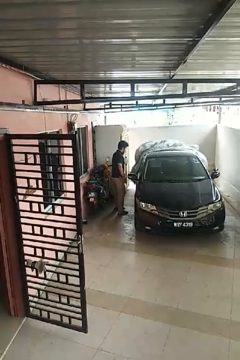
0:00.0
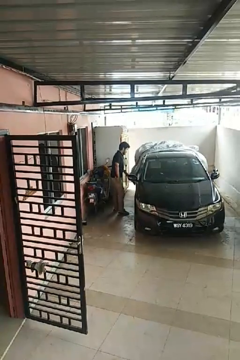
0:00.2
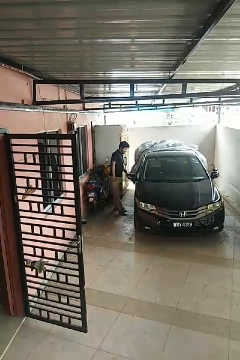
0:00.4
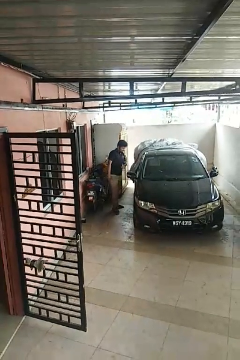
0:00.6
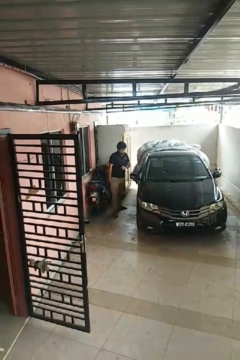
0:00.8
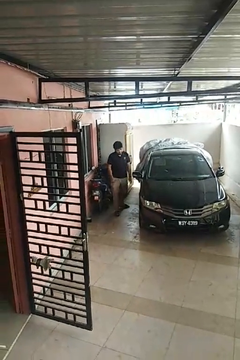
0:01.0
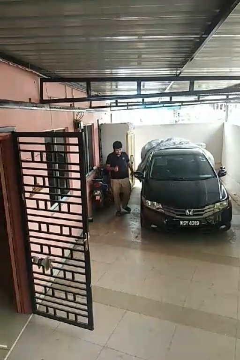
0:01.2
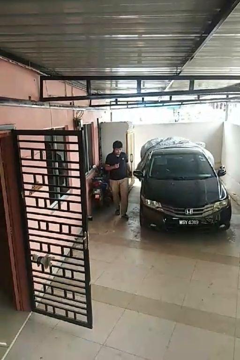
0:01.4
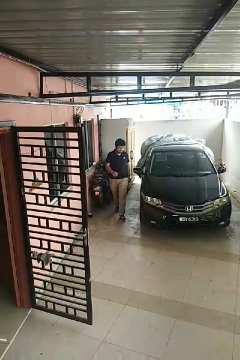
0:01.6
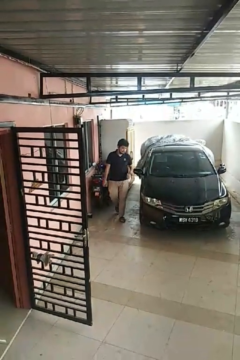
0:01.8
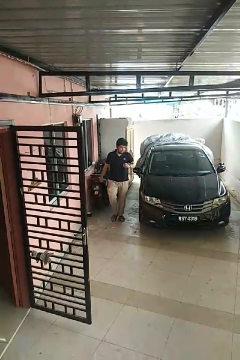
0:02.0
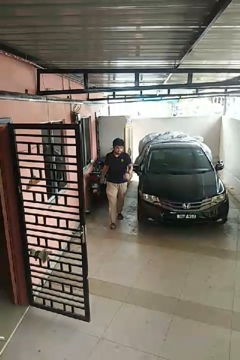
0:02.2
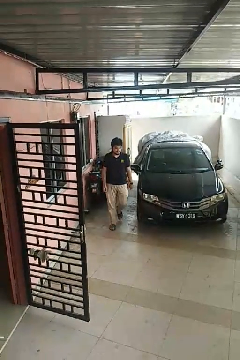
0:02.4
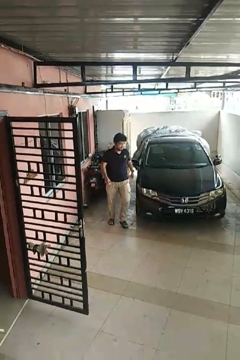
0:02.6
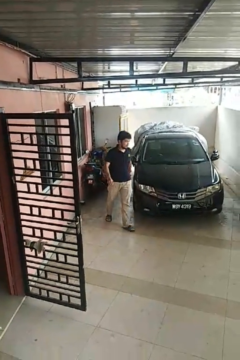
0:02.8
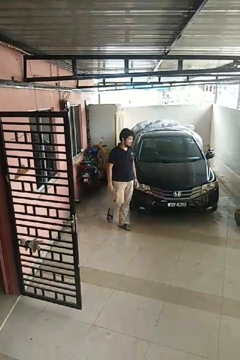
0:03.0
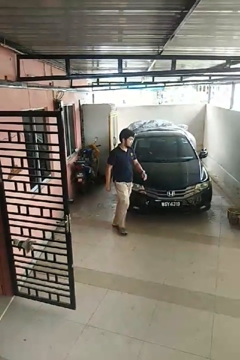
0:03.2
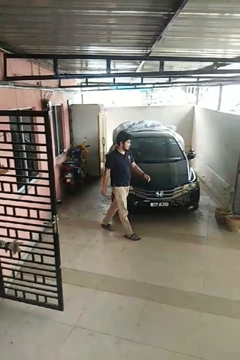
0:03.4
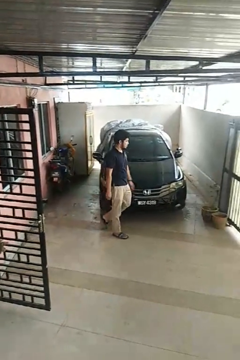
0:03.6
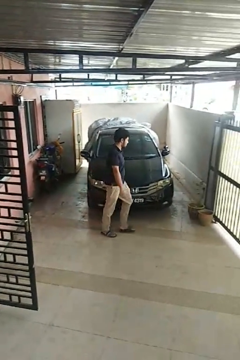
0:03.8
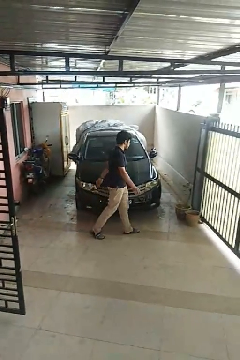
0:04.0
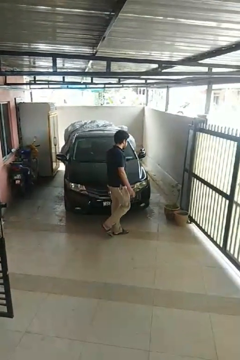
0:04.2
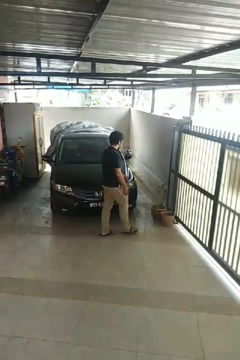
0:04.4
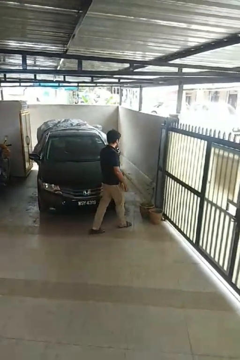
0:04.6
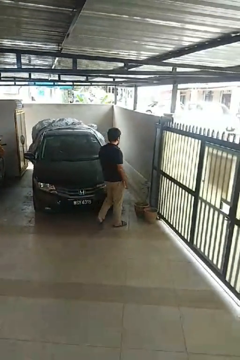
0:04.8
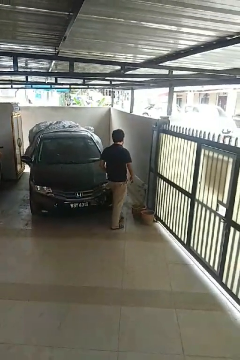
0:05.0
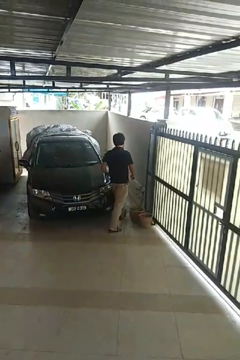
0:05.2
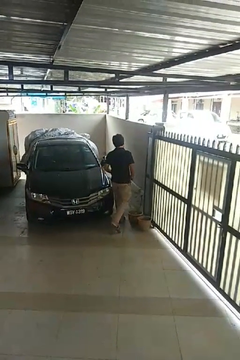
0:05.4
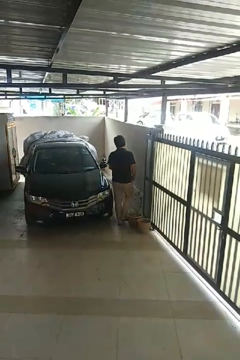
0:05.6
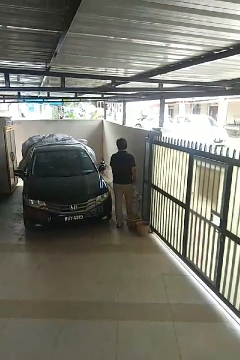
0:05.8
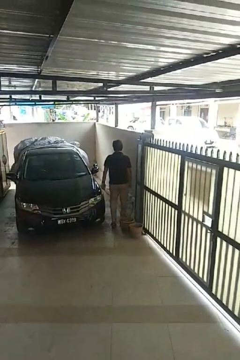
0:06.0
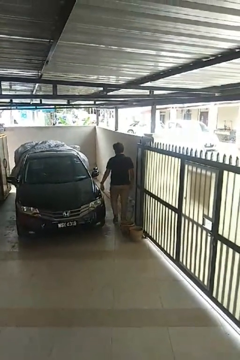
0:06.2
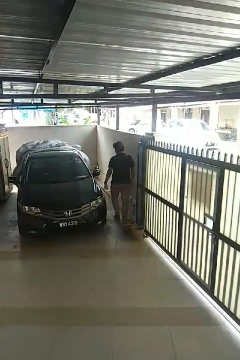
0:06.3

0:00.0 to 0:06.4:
person walks around car

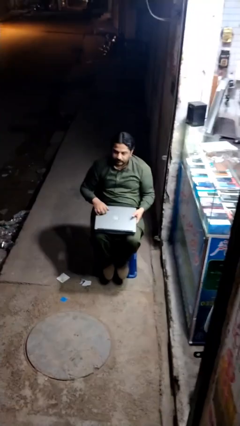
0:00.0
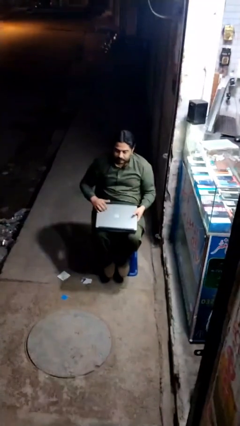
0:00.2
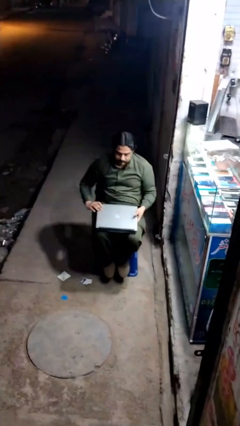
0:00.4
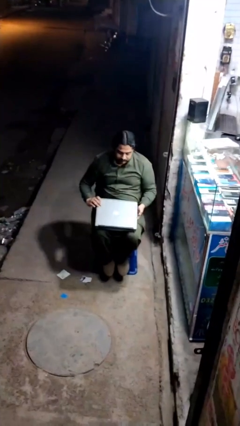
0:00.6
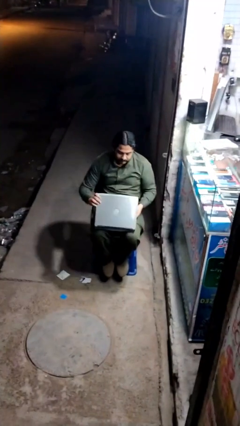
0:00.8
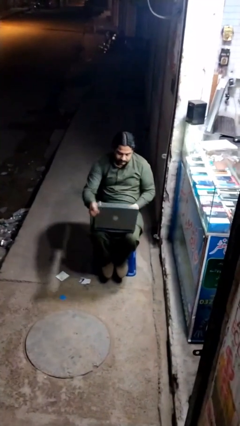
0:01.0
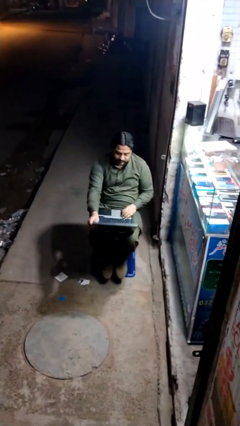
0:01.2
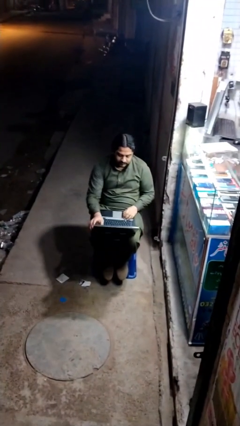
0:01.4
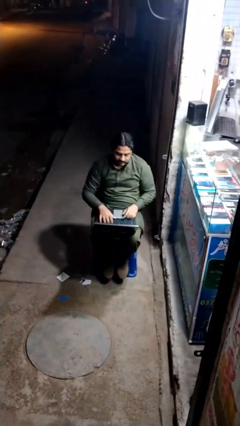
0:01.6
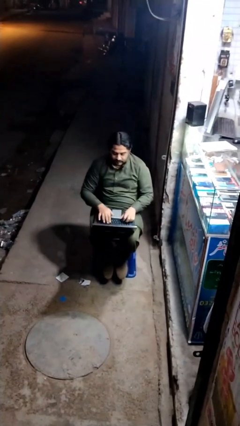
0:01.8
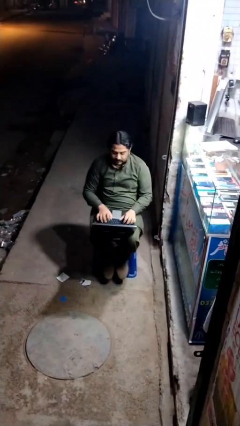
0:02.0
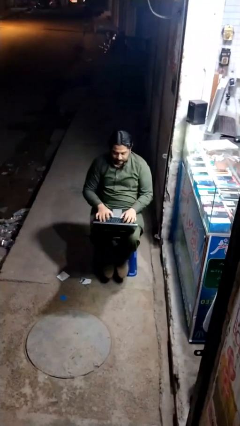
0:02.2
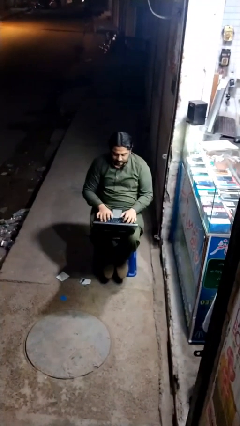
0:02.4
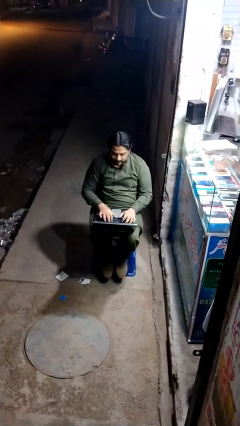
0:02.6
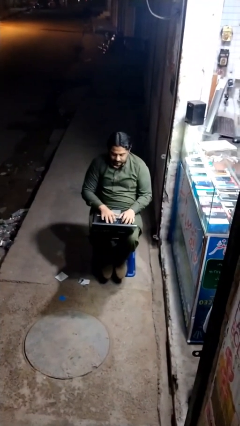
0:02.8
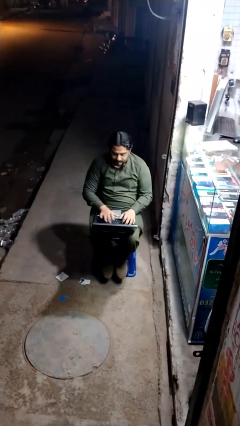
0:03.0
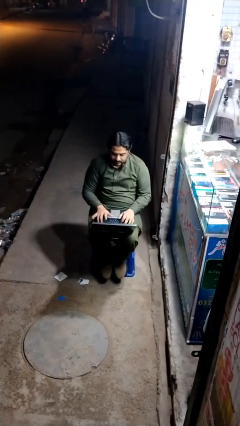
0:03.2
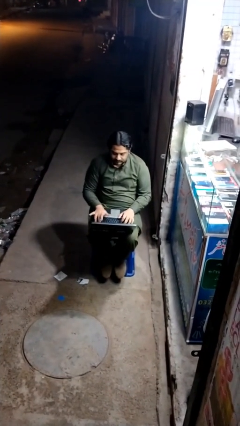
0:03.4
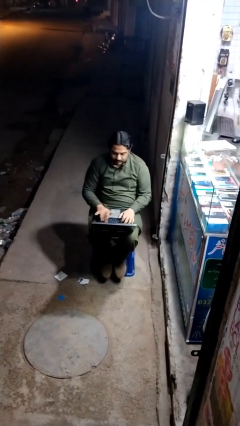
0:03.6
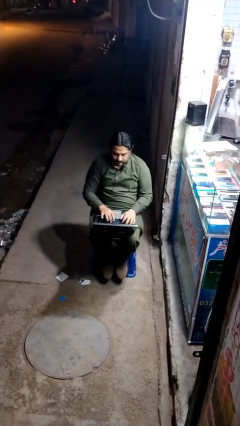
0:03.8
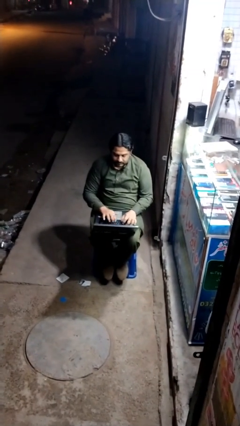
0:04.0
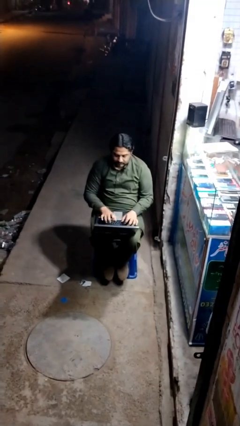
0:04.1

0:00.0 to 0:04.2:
person interacts with laptop

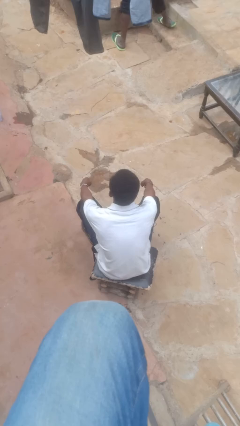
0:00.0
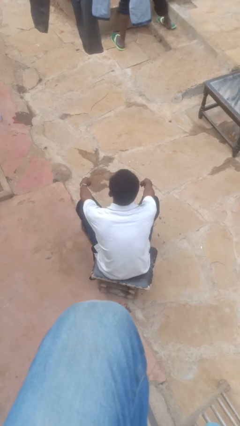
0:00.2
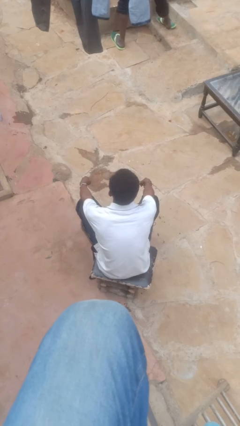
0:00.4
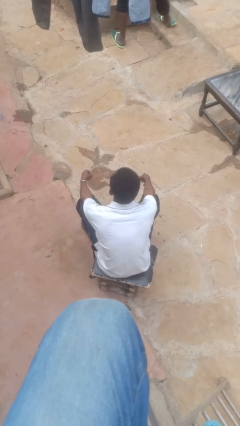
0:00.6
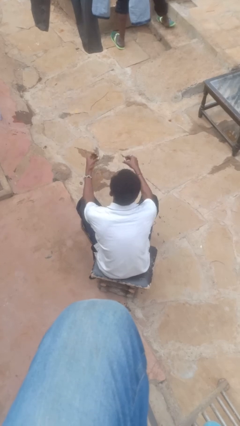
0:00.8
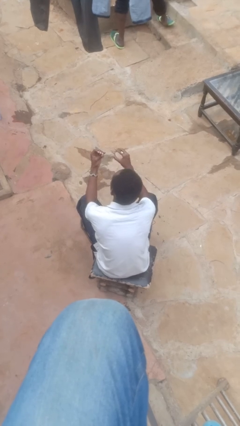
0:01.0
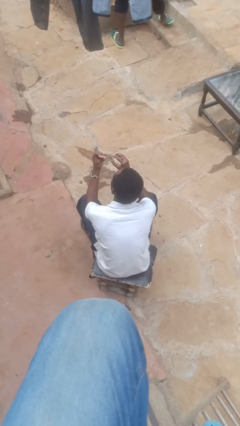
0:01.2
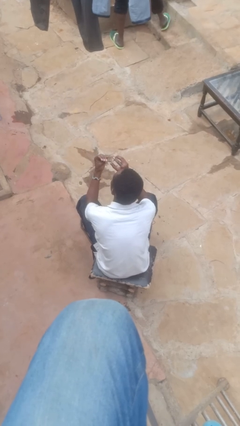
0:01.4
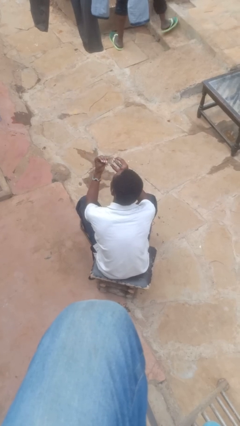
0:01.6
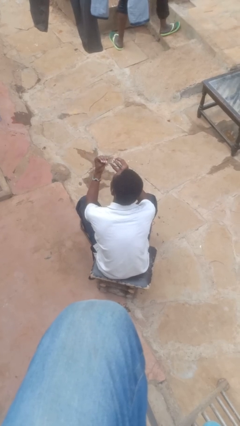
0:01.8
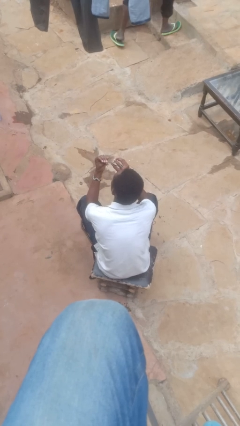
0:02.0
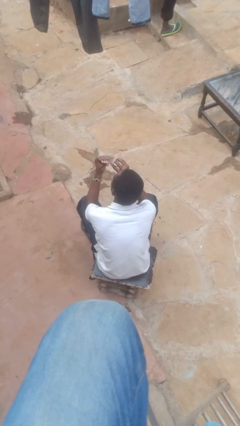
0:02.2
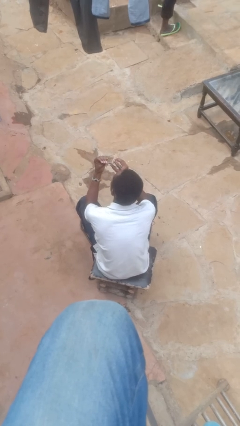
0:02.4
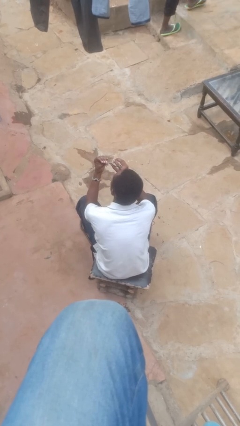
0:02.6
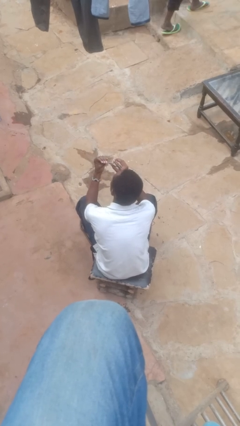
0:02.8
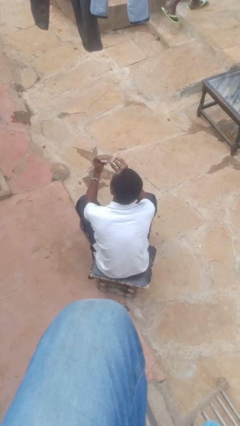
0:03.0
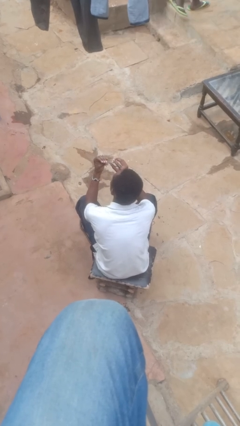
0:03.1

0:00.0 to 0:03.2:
person clips fingernails

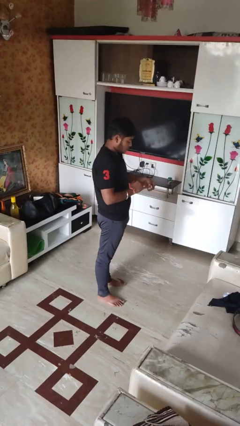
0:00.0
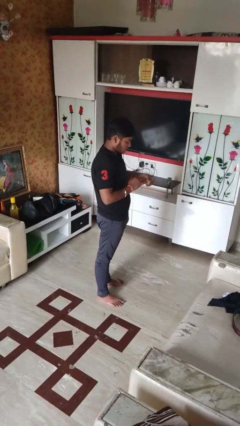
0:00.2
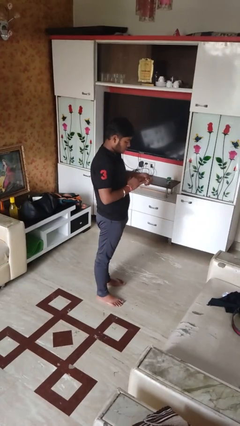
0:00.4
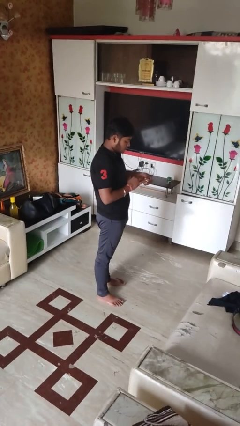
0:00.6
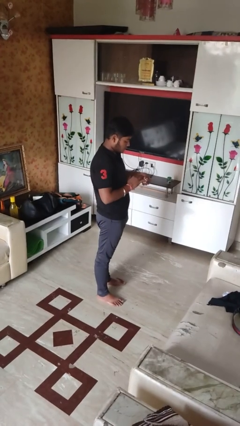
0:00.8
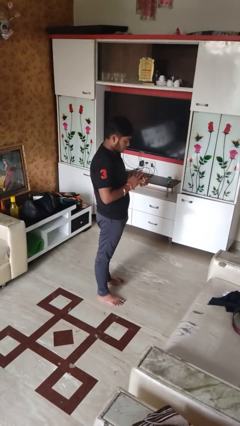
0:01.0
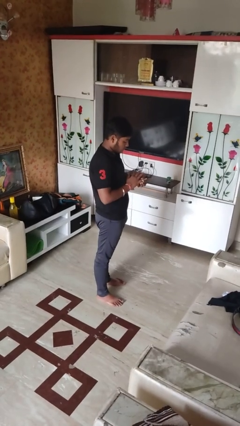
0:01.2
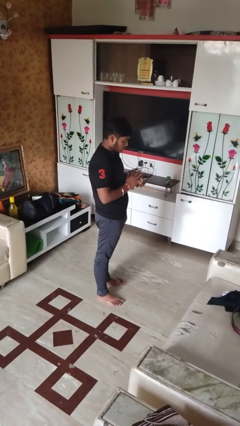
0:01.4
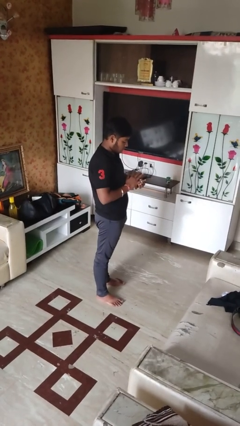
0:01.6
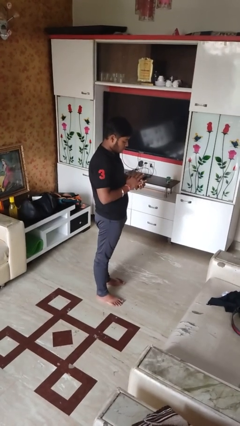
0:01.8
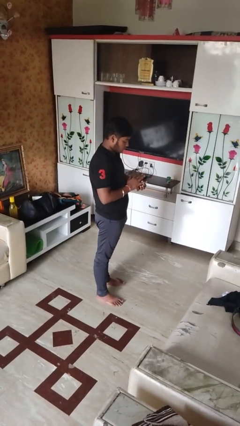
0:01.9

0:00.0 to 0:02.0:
person puts on ring

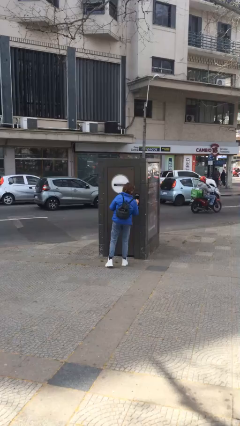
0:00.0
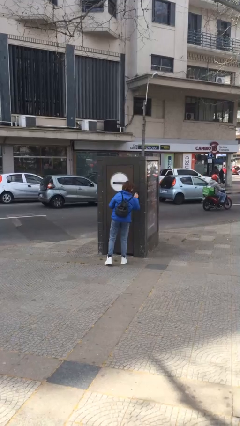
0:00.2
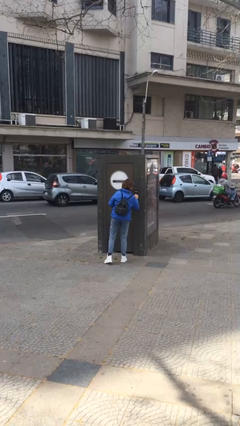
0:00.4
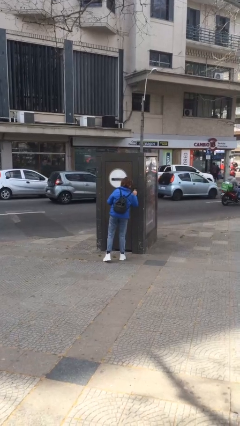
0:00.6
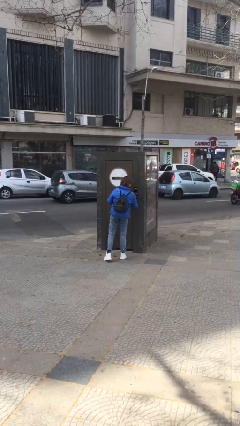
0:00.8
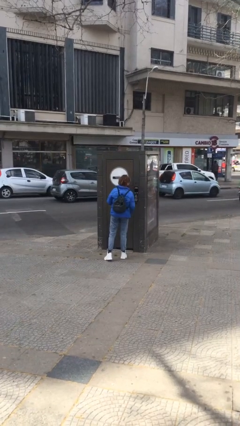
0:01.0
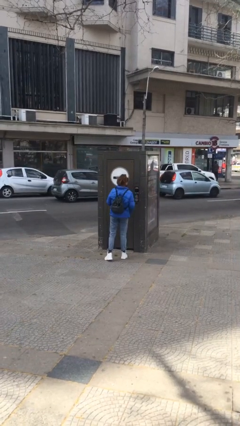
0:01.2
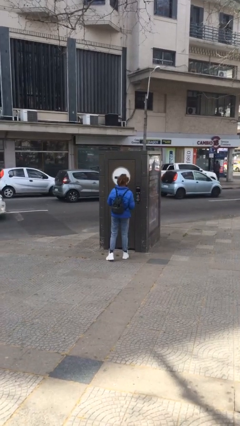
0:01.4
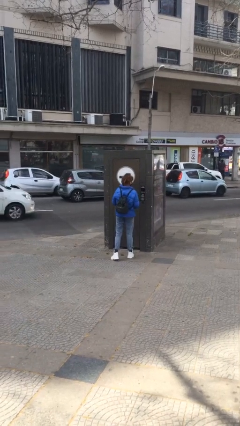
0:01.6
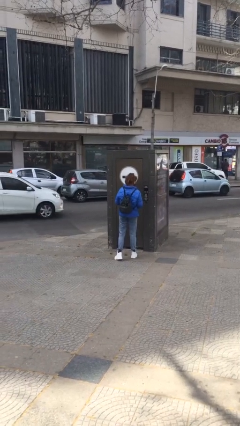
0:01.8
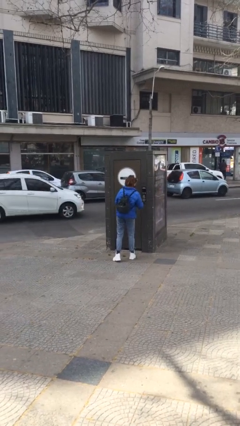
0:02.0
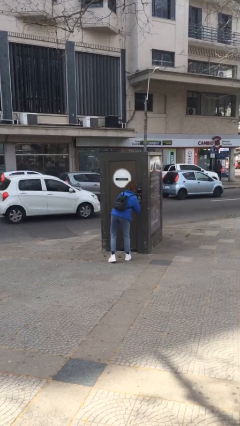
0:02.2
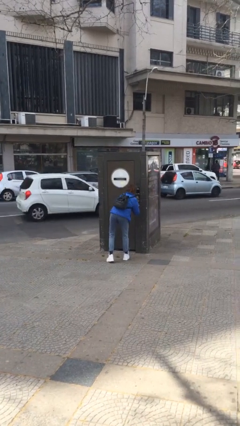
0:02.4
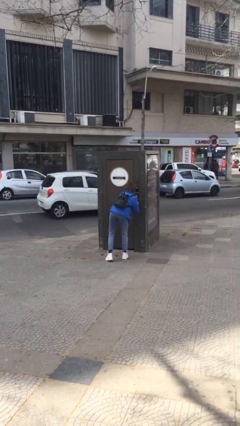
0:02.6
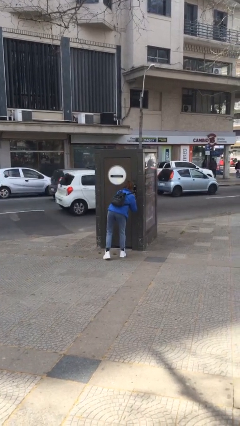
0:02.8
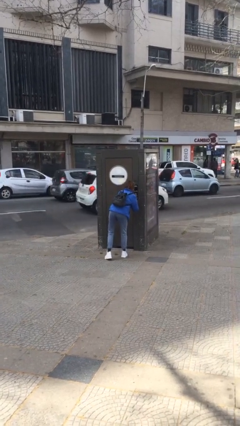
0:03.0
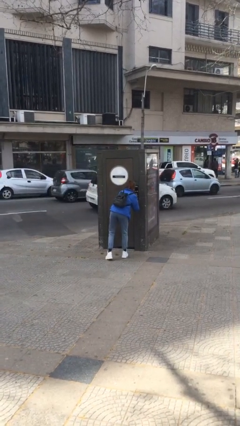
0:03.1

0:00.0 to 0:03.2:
person purchases from machine
